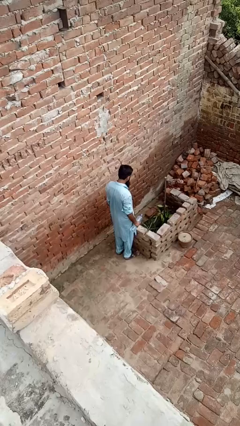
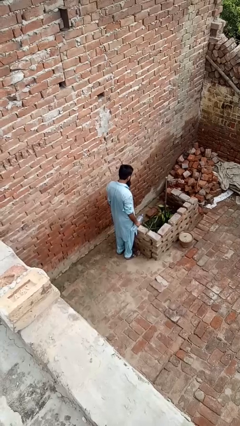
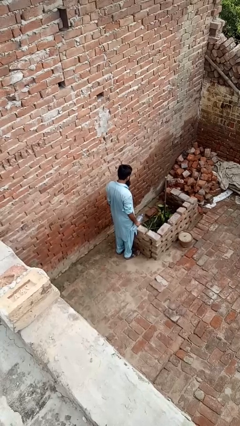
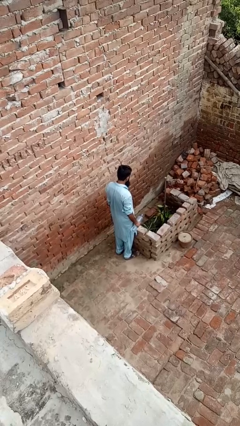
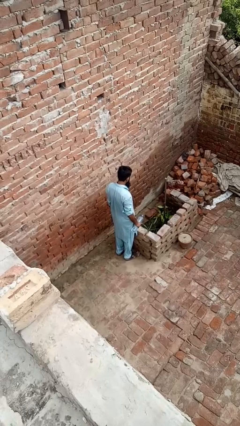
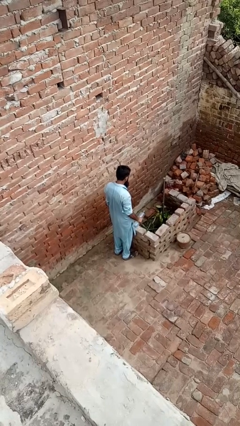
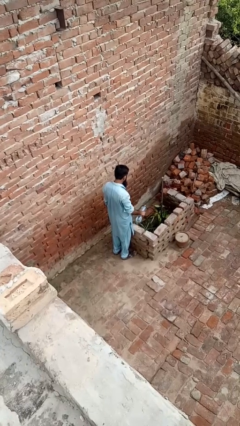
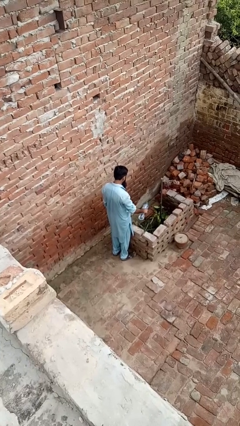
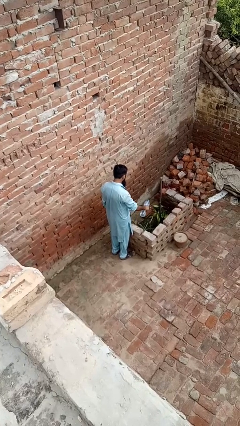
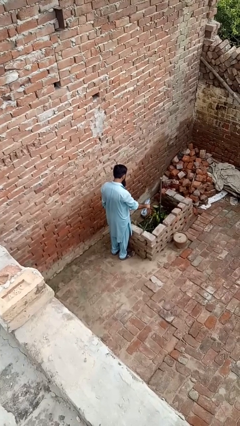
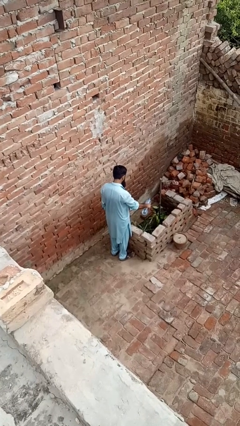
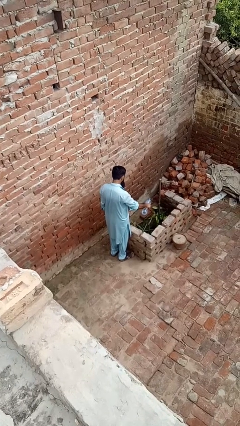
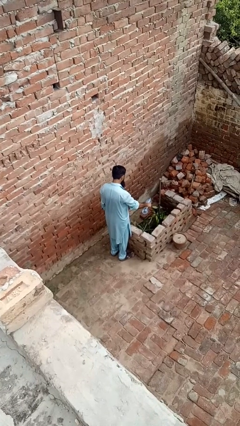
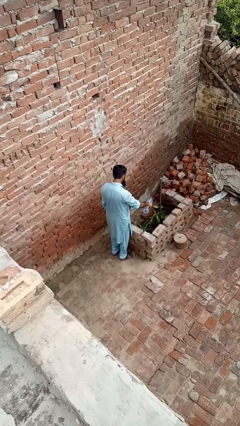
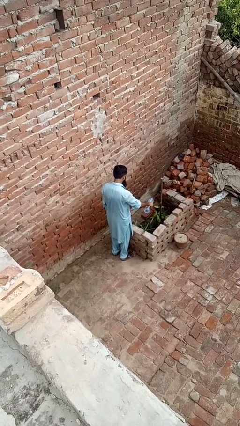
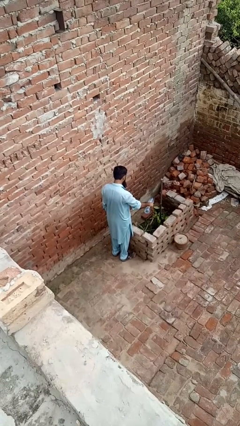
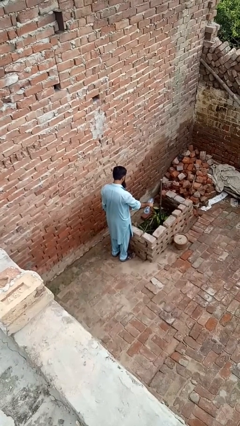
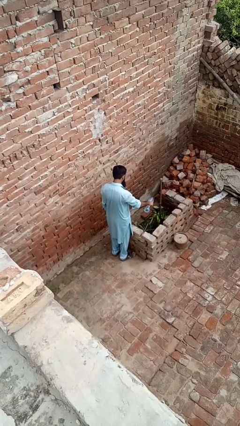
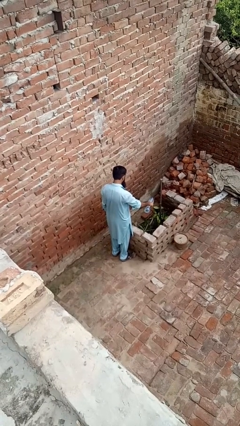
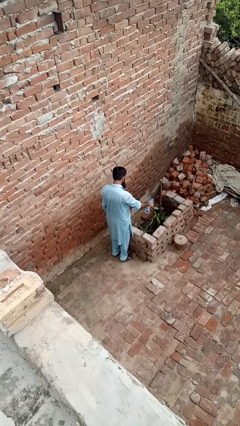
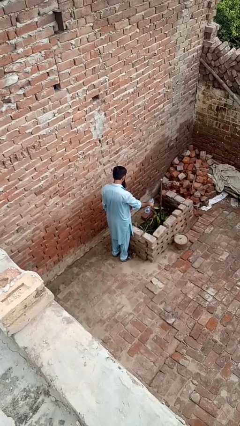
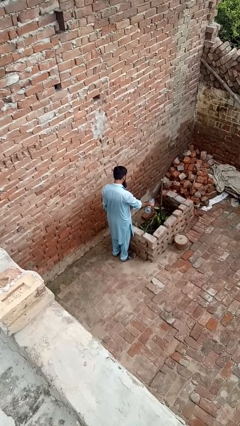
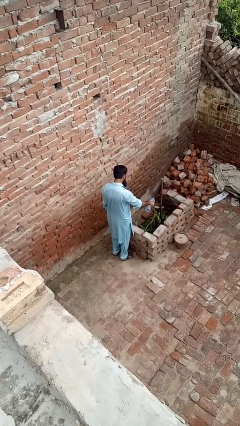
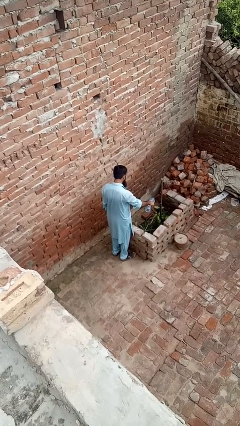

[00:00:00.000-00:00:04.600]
person waters houseplant

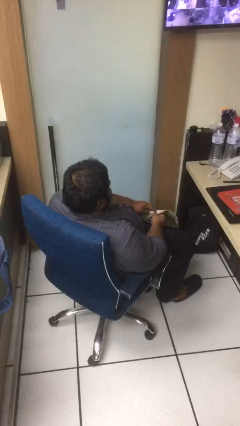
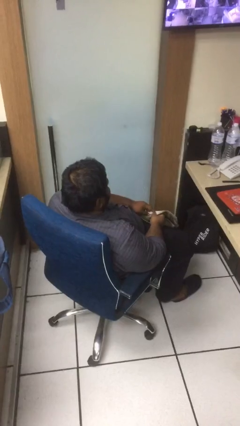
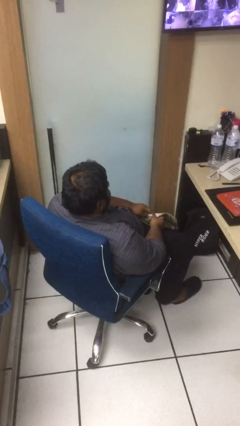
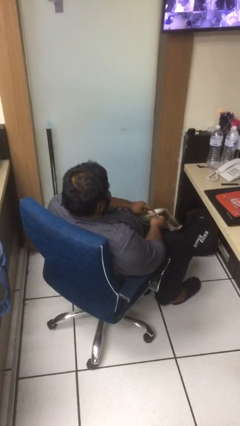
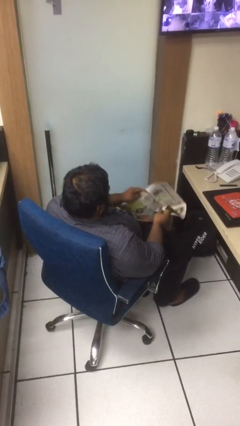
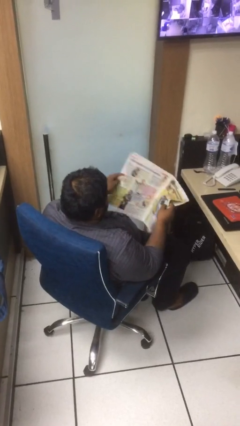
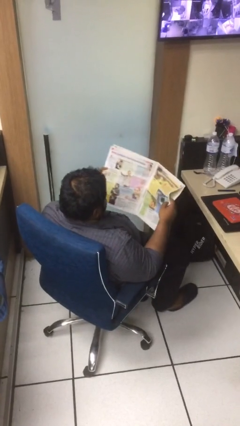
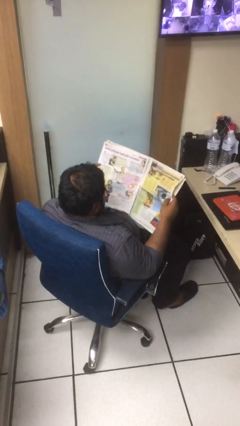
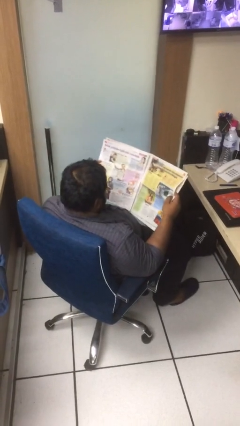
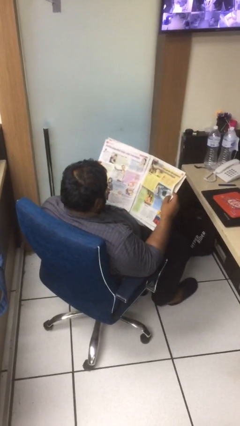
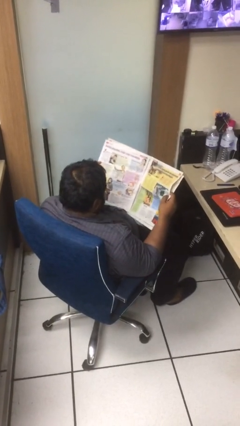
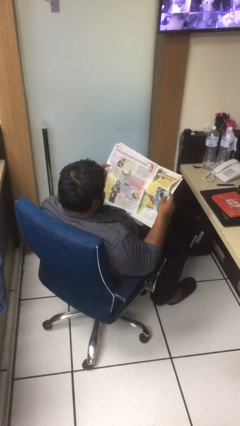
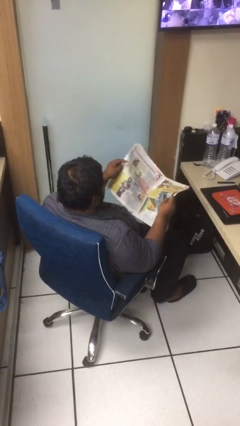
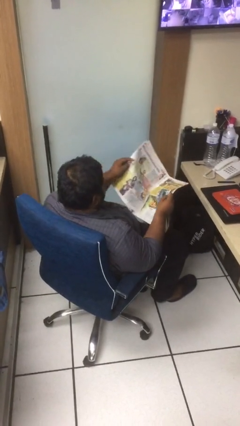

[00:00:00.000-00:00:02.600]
person reads newspaper

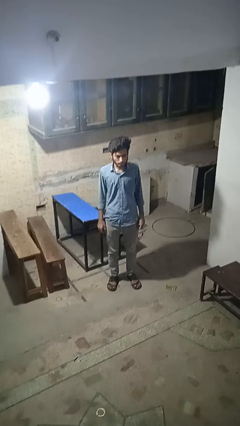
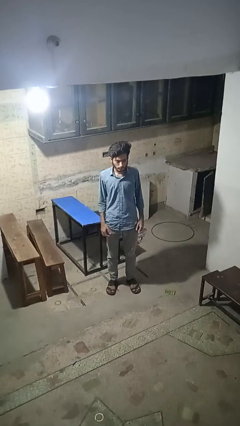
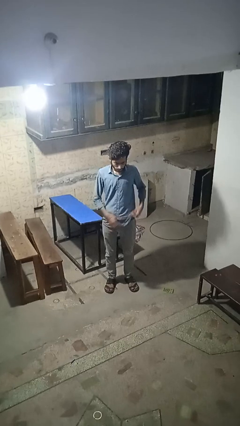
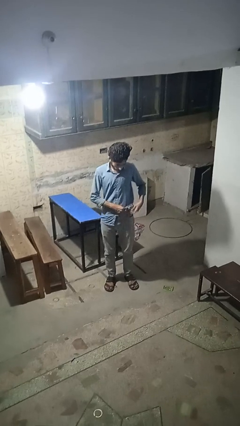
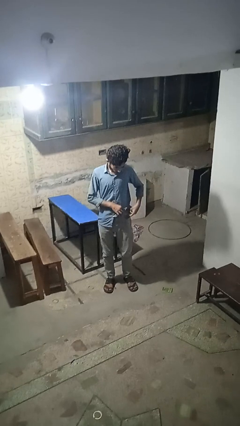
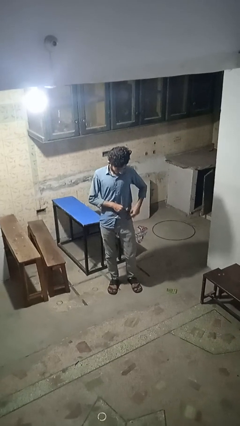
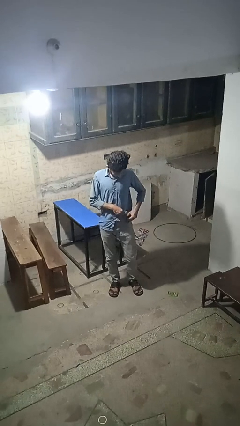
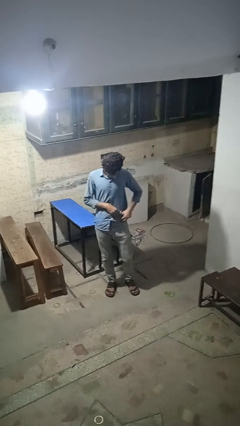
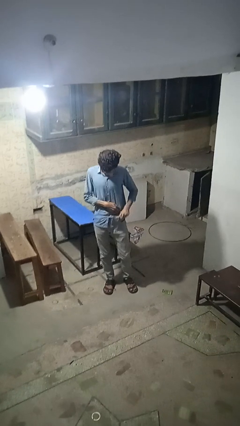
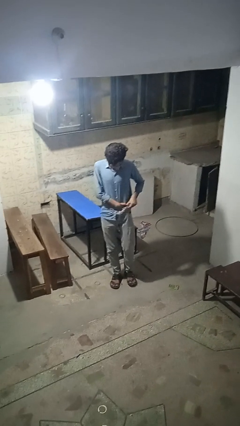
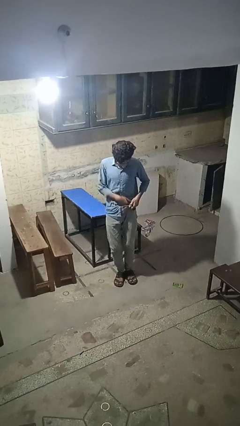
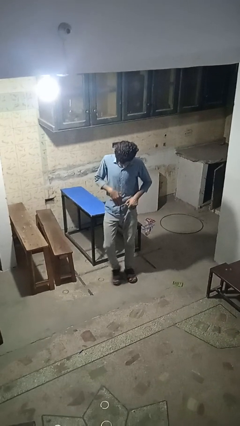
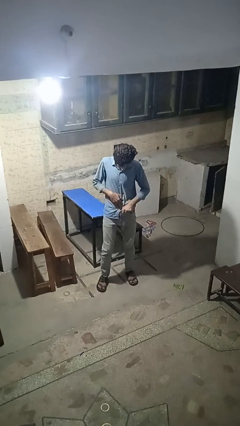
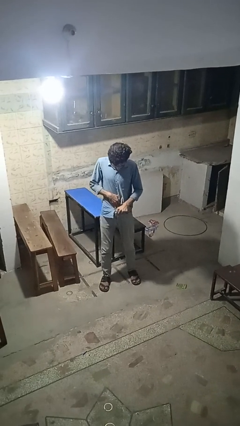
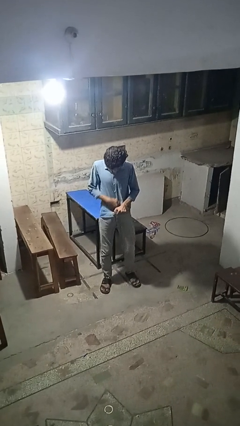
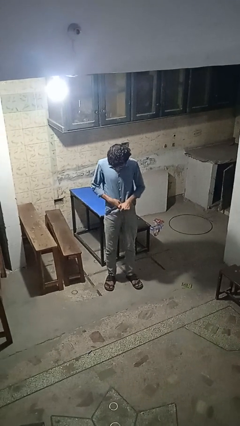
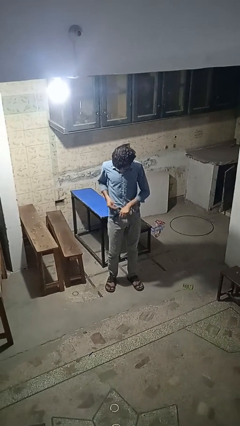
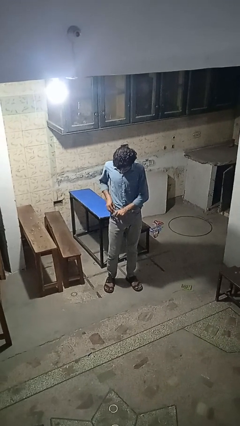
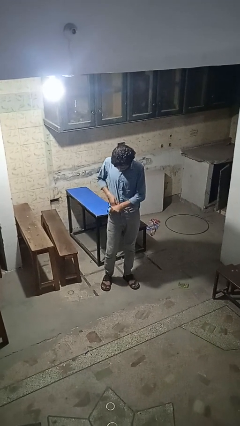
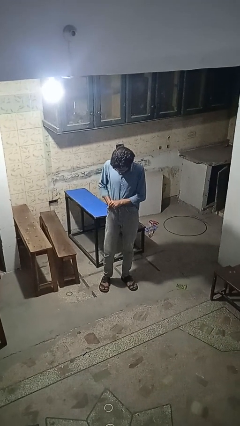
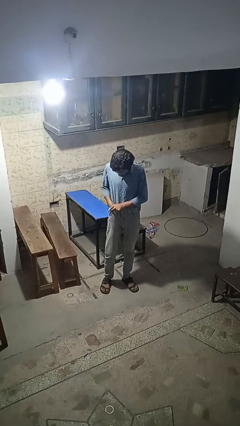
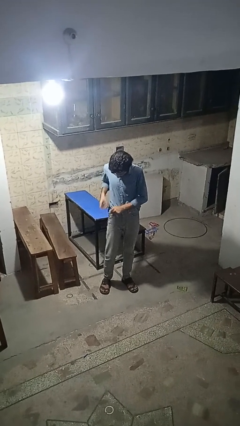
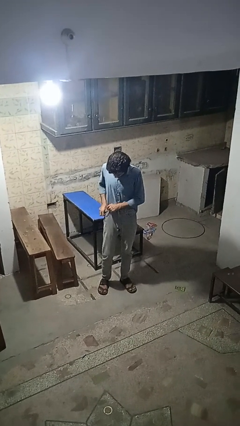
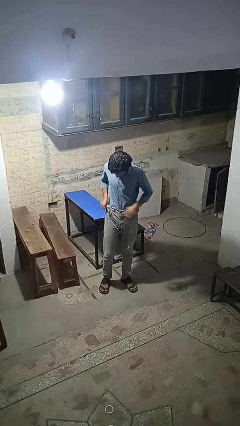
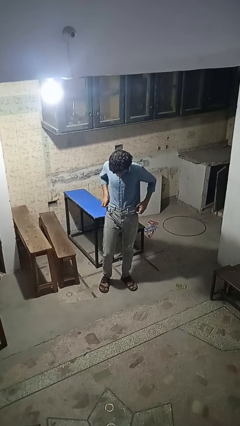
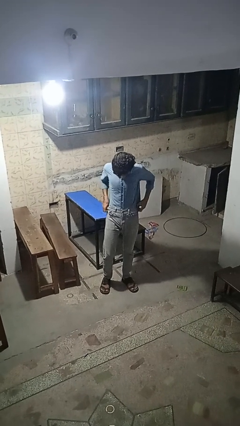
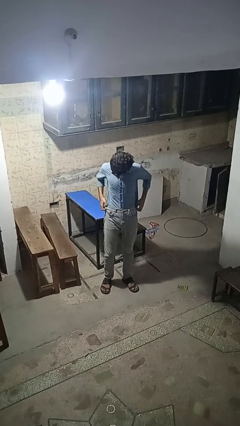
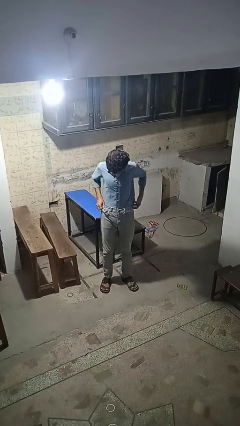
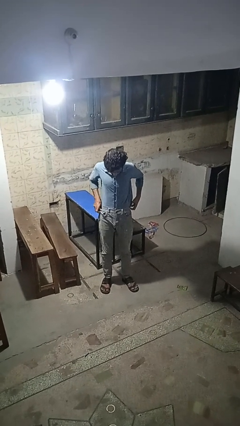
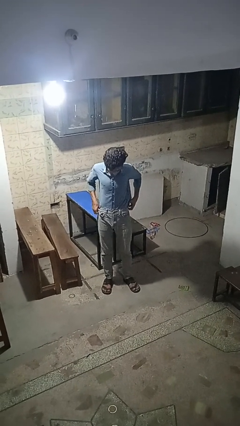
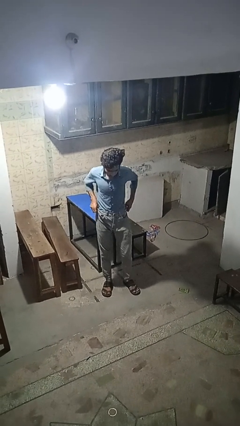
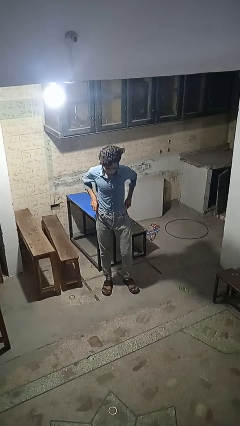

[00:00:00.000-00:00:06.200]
person tucks in shirt

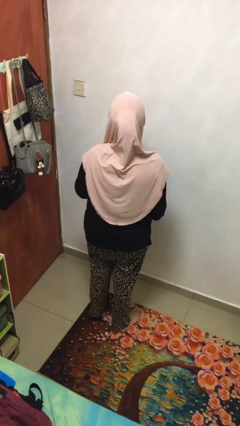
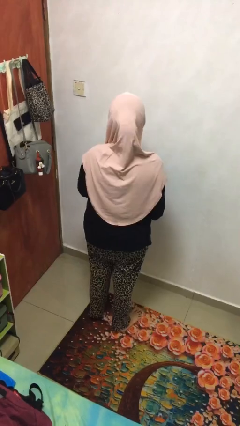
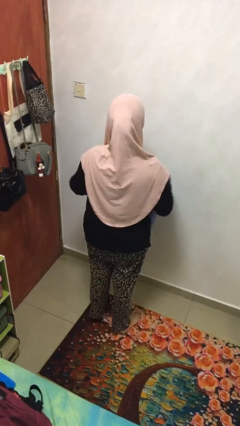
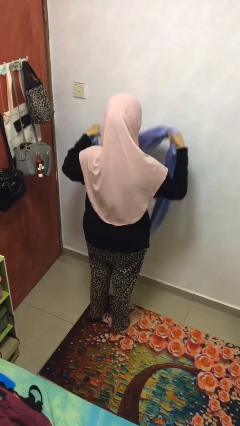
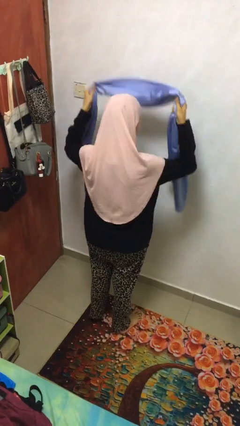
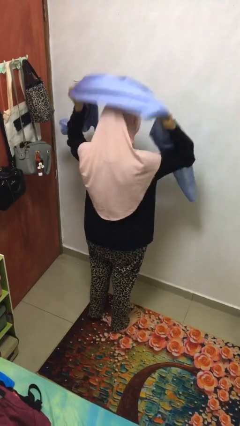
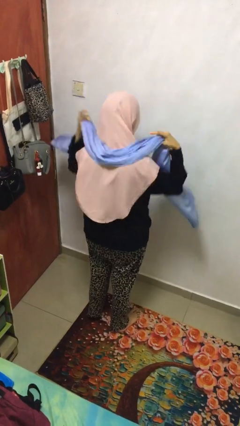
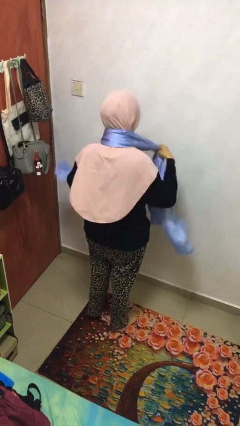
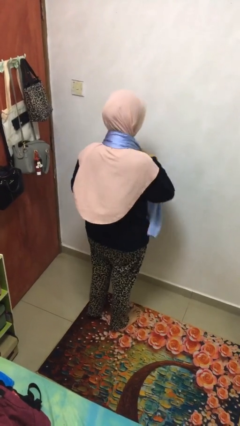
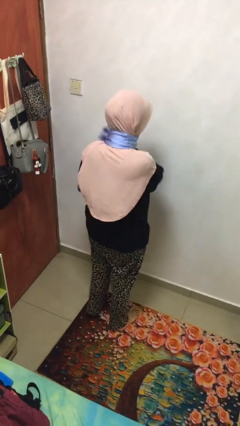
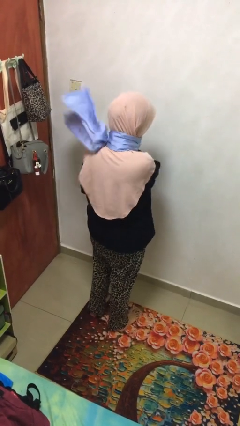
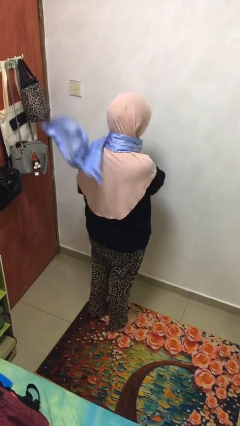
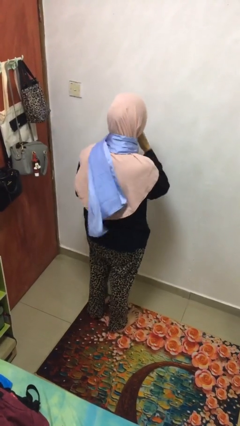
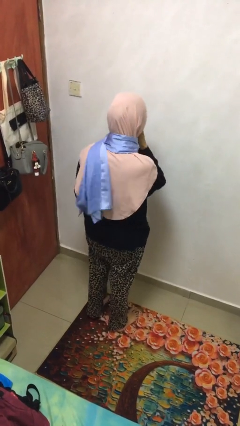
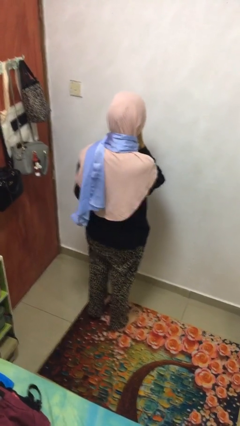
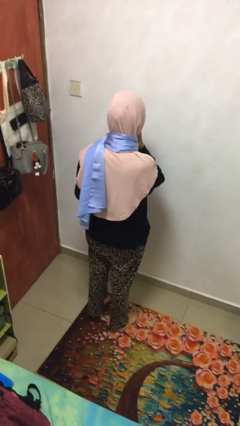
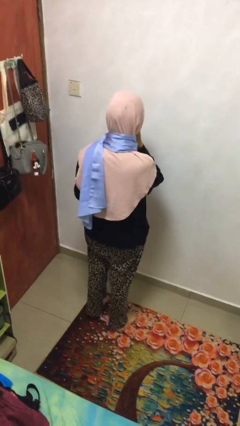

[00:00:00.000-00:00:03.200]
person puts on scarf

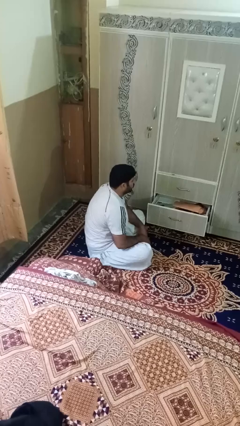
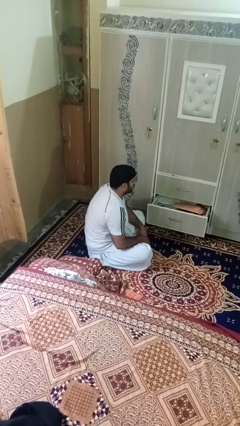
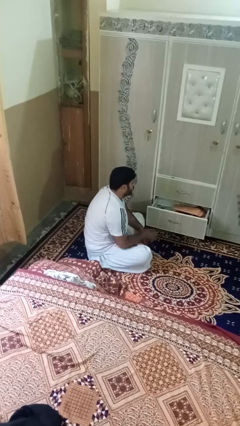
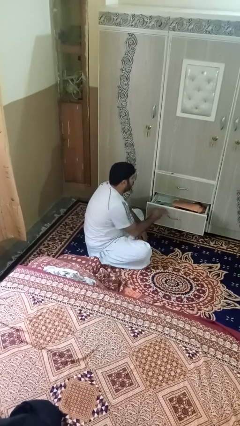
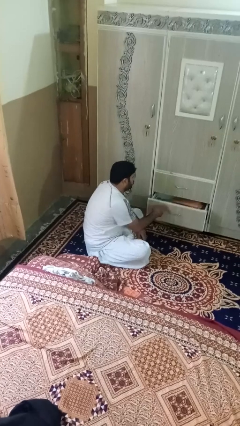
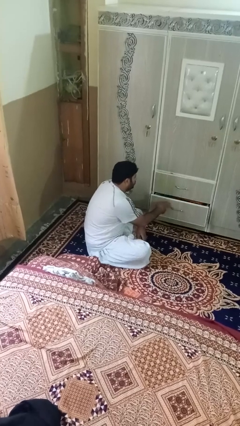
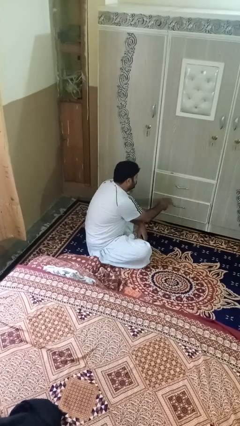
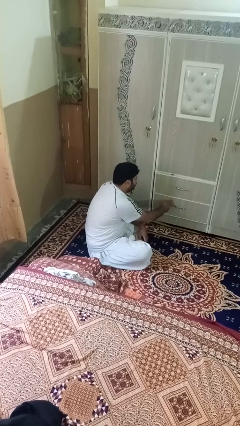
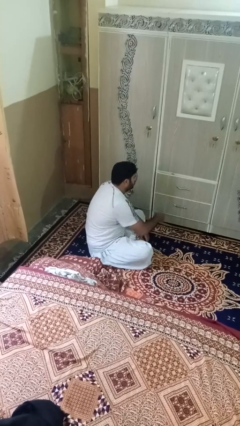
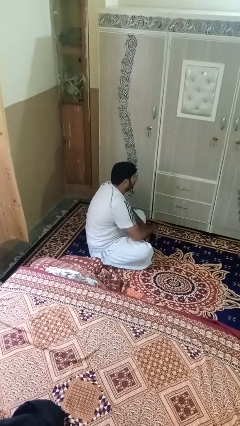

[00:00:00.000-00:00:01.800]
person closes dresser drawer
